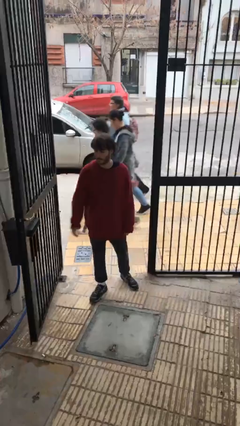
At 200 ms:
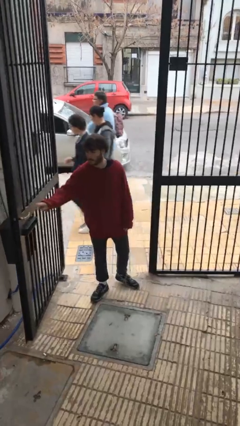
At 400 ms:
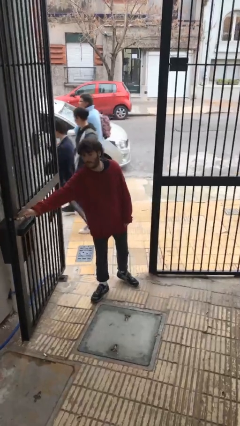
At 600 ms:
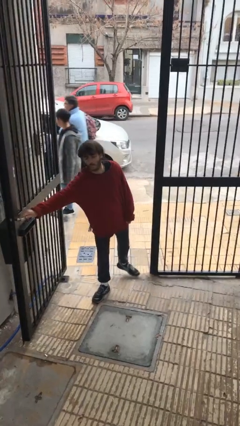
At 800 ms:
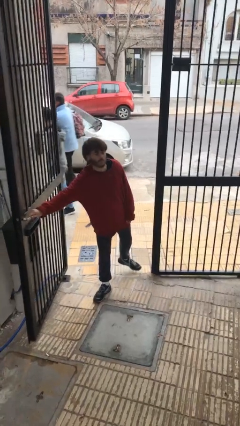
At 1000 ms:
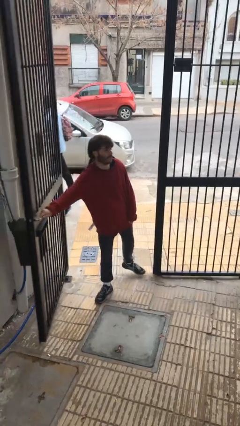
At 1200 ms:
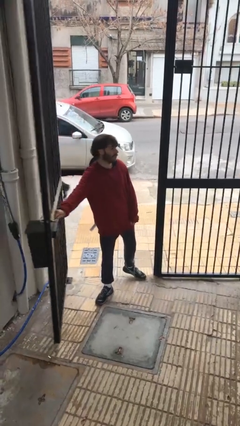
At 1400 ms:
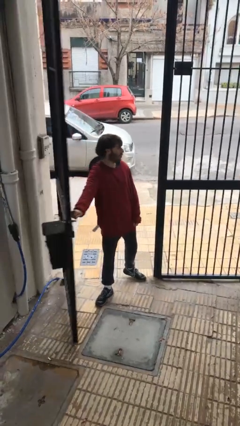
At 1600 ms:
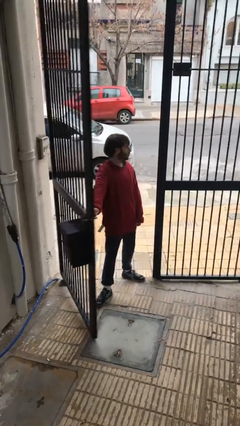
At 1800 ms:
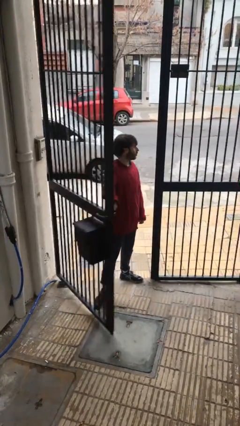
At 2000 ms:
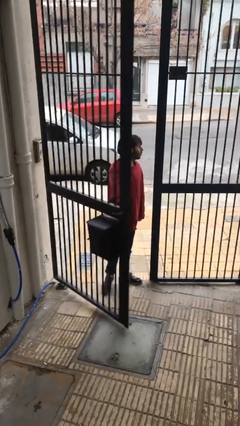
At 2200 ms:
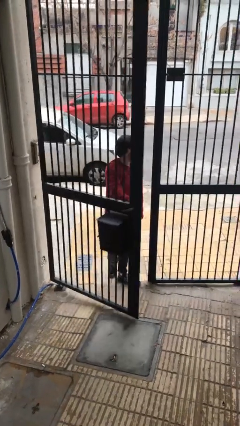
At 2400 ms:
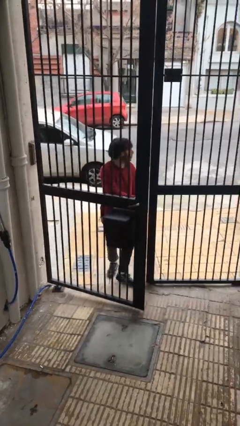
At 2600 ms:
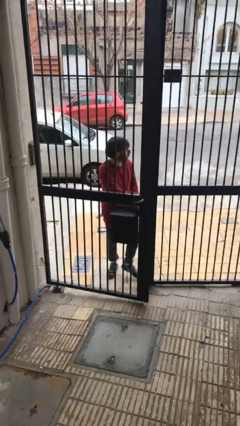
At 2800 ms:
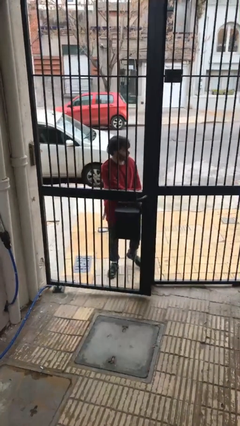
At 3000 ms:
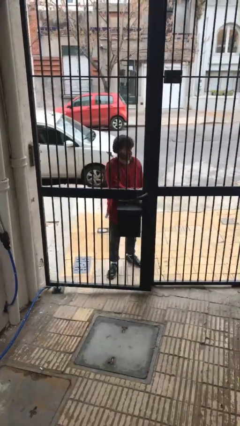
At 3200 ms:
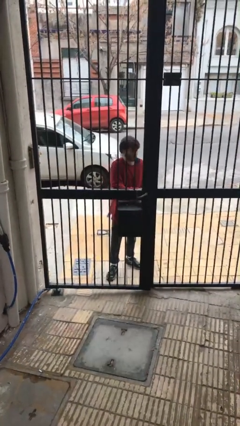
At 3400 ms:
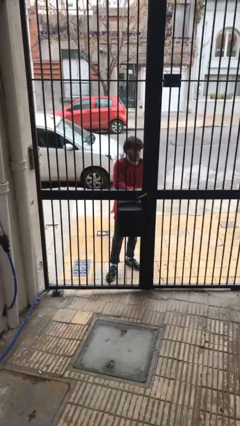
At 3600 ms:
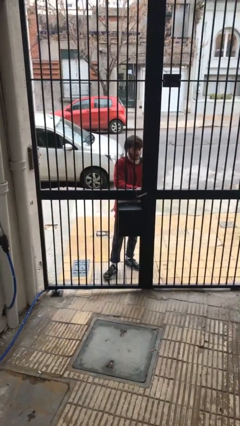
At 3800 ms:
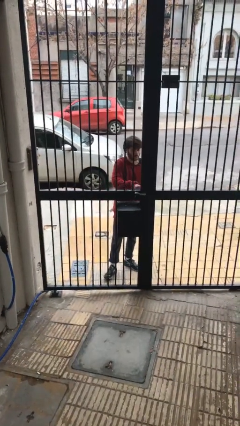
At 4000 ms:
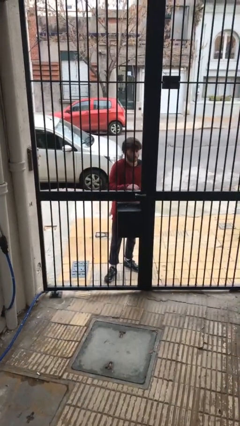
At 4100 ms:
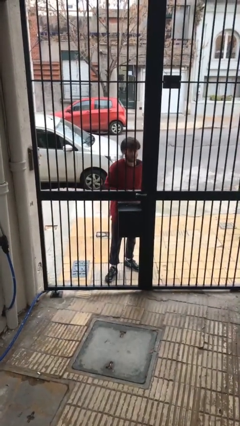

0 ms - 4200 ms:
person closes gate

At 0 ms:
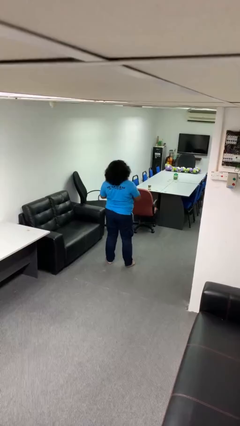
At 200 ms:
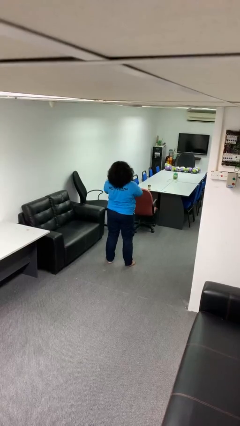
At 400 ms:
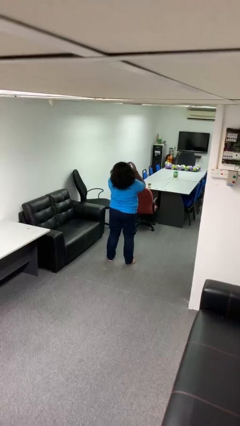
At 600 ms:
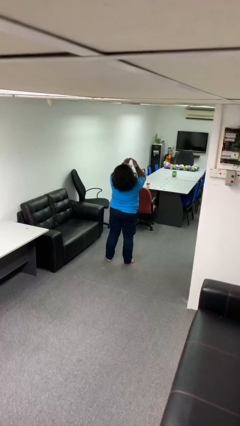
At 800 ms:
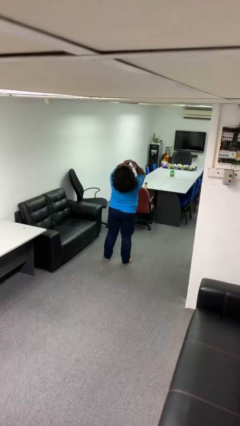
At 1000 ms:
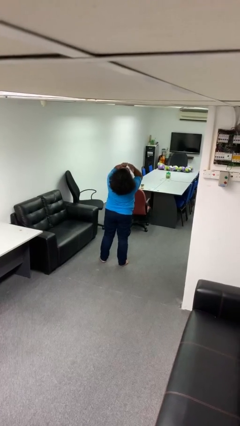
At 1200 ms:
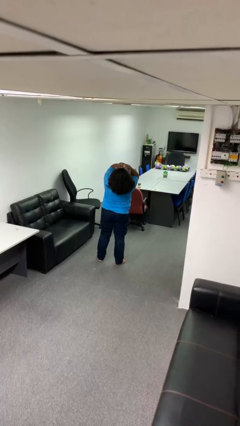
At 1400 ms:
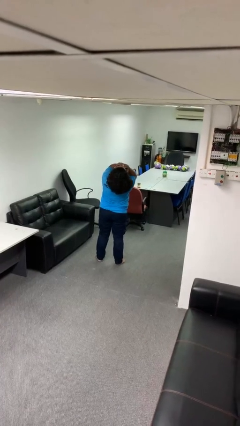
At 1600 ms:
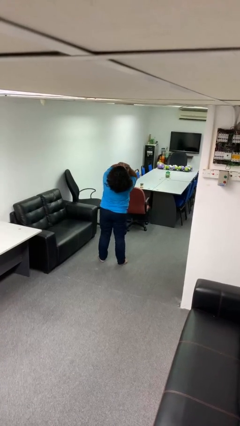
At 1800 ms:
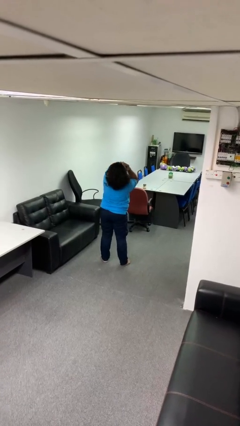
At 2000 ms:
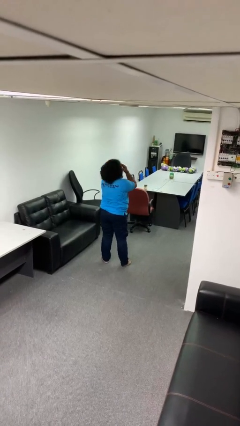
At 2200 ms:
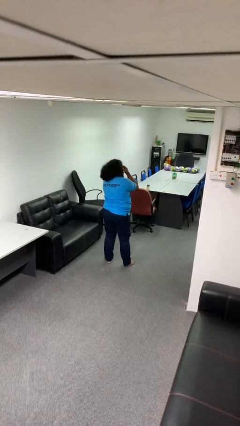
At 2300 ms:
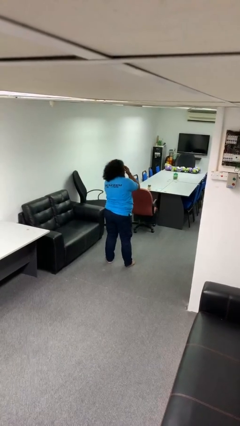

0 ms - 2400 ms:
person covers face with hands

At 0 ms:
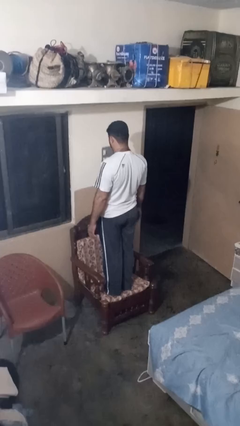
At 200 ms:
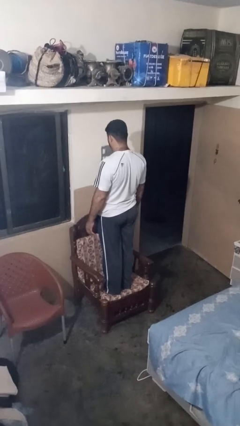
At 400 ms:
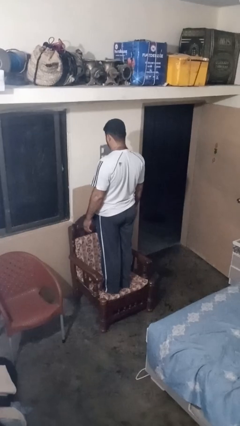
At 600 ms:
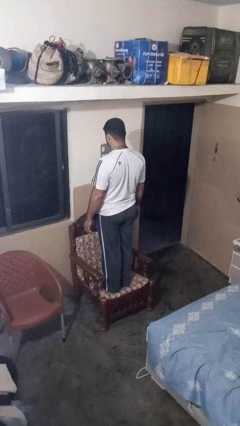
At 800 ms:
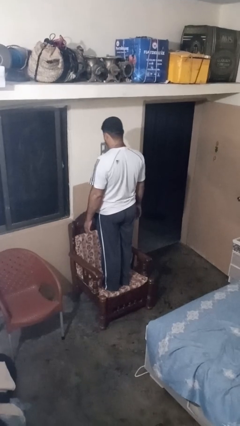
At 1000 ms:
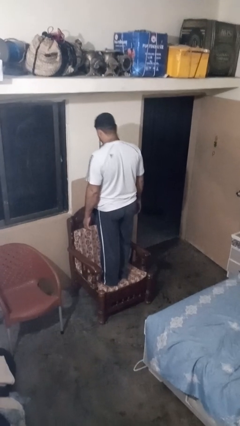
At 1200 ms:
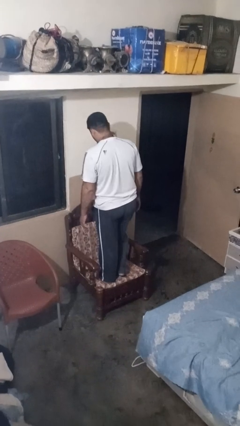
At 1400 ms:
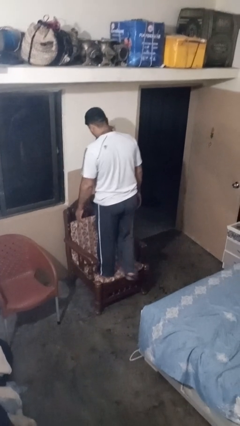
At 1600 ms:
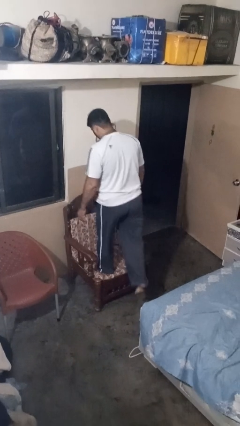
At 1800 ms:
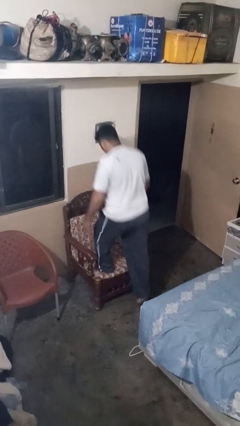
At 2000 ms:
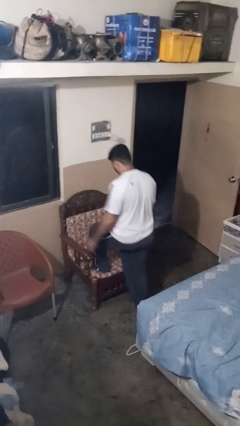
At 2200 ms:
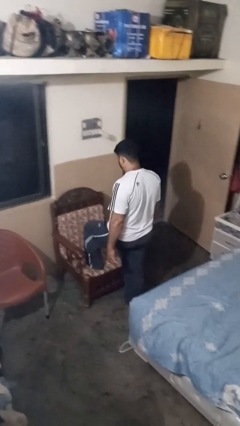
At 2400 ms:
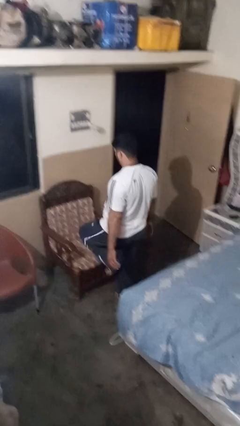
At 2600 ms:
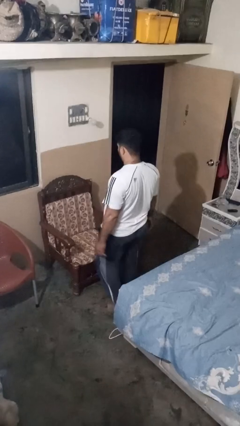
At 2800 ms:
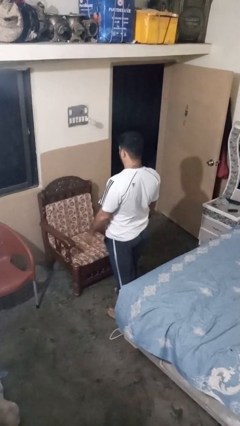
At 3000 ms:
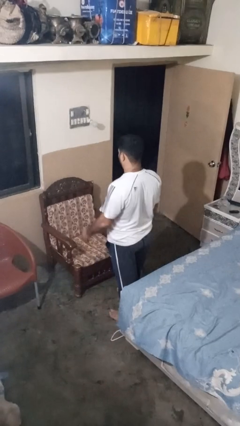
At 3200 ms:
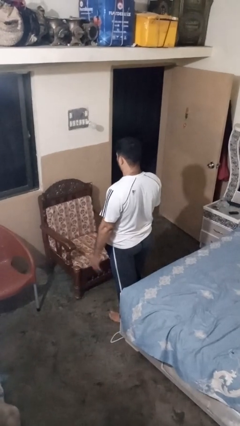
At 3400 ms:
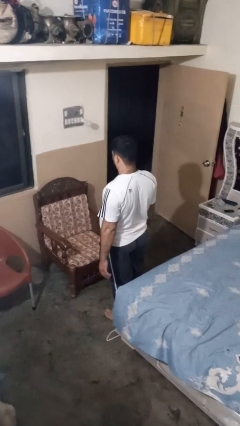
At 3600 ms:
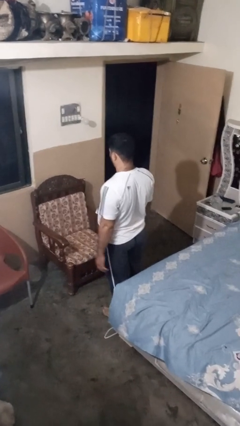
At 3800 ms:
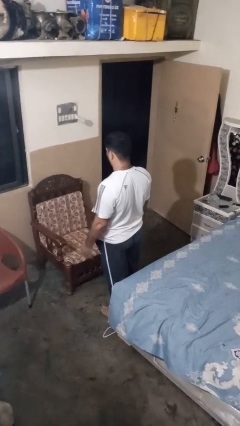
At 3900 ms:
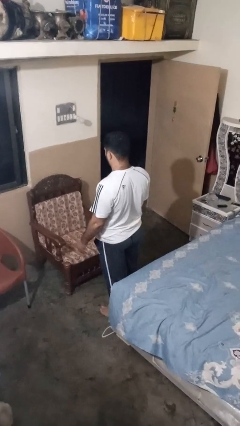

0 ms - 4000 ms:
person climbs off couch

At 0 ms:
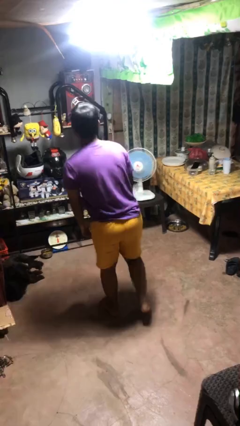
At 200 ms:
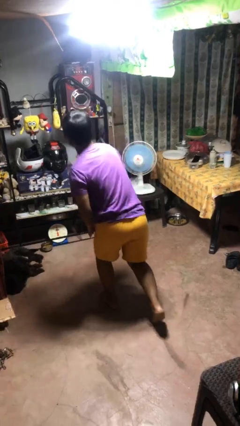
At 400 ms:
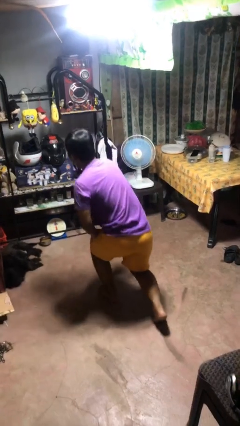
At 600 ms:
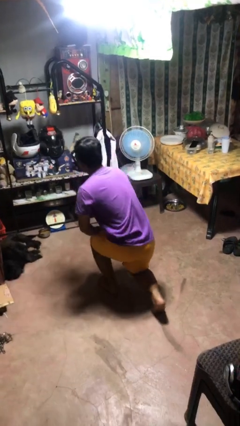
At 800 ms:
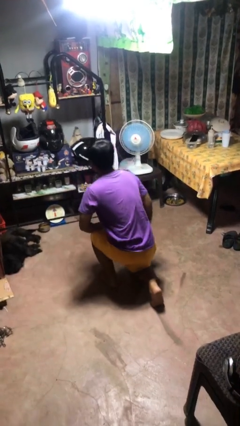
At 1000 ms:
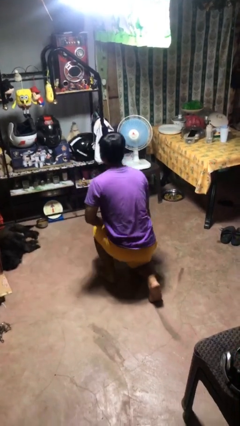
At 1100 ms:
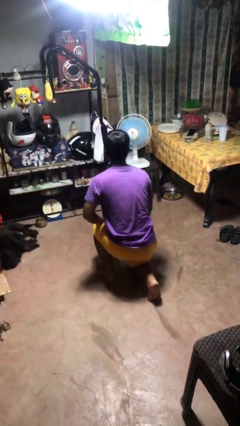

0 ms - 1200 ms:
person kneels

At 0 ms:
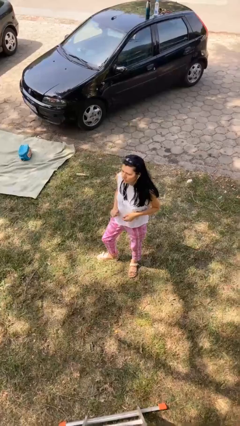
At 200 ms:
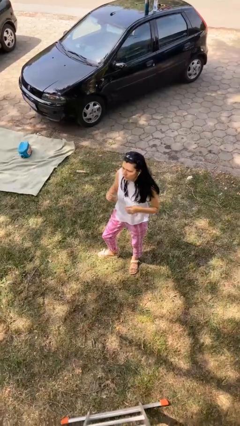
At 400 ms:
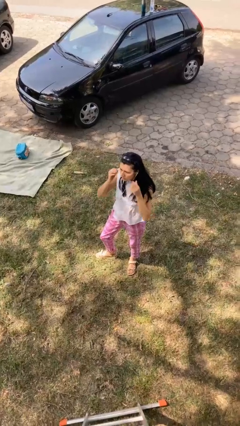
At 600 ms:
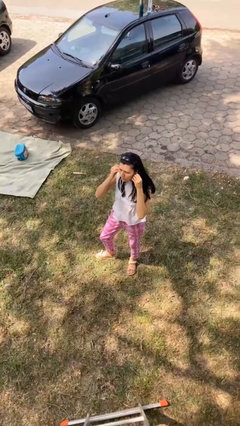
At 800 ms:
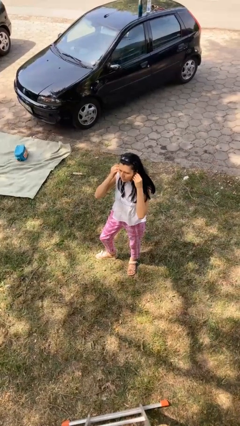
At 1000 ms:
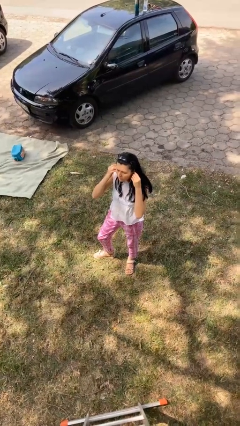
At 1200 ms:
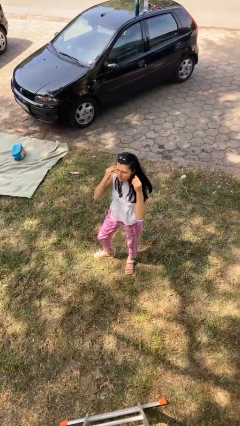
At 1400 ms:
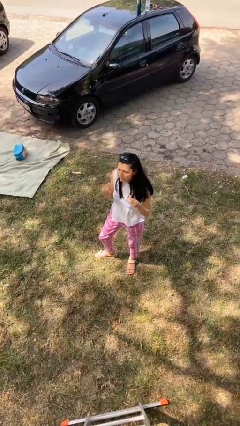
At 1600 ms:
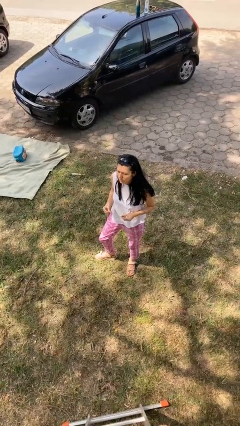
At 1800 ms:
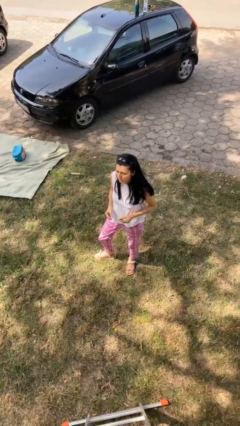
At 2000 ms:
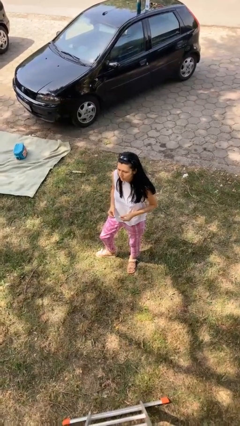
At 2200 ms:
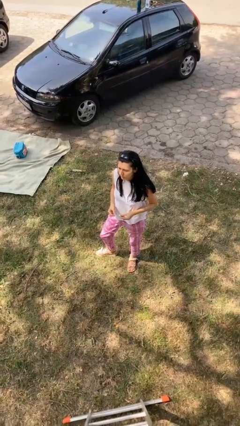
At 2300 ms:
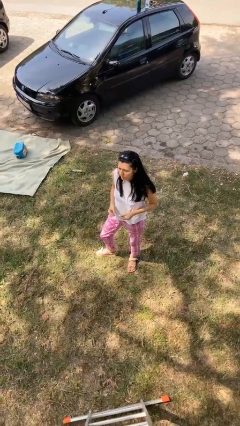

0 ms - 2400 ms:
person takes off headphones

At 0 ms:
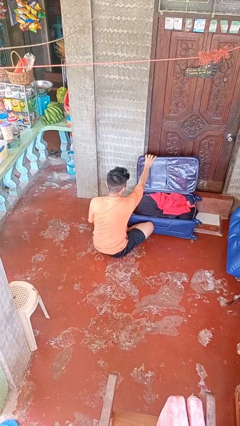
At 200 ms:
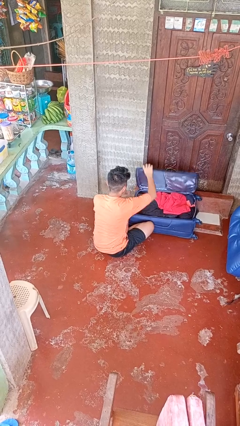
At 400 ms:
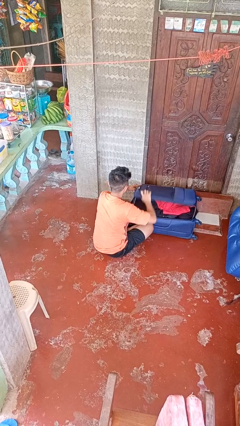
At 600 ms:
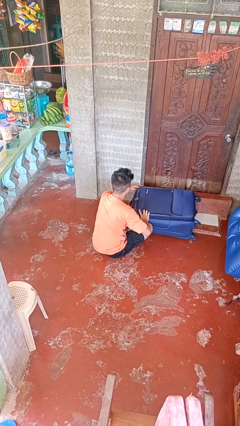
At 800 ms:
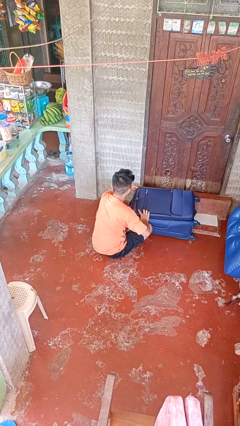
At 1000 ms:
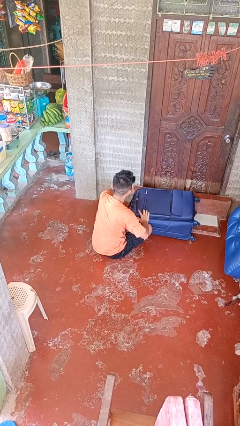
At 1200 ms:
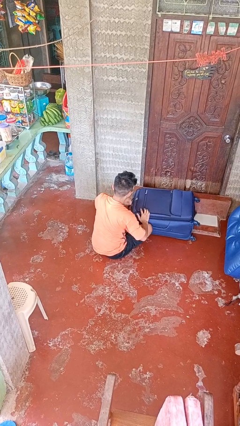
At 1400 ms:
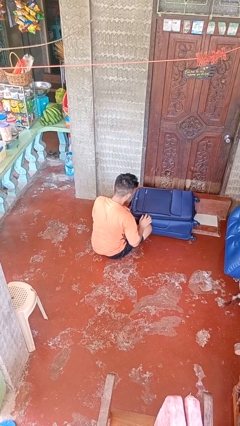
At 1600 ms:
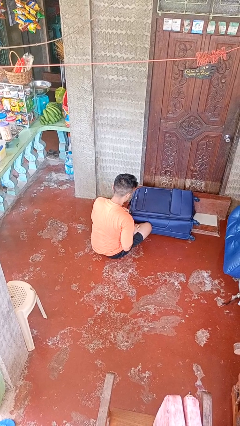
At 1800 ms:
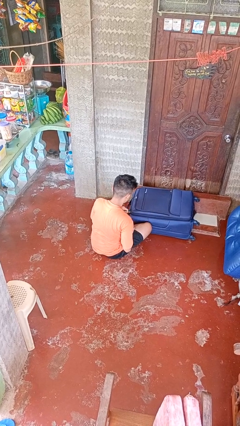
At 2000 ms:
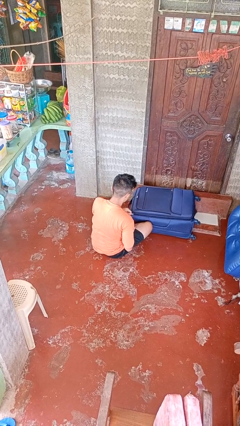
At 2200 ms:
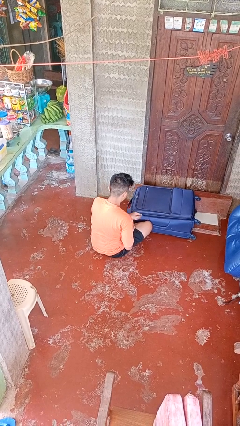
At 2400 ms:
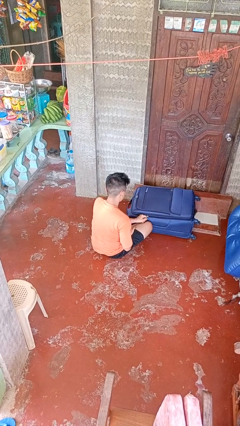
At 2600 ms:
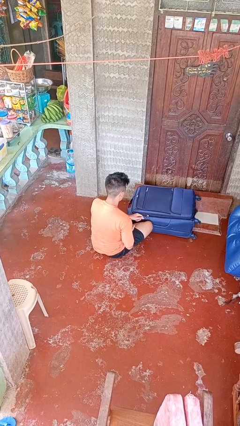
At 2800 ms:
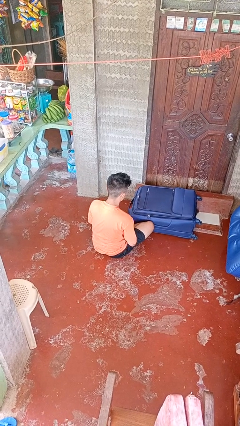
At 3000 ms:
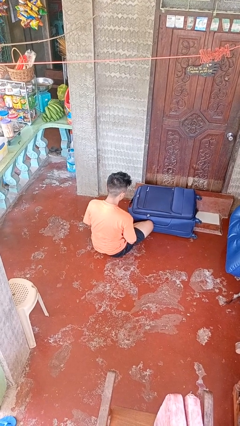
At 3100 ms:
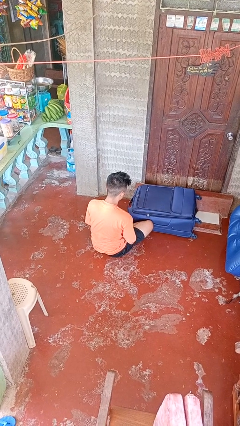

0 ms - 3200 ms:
person closes suitcase
